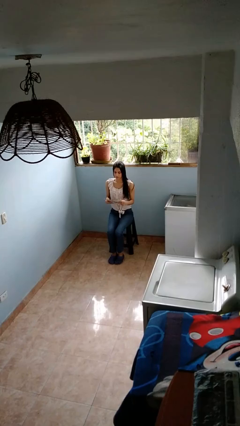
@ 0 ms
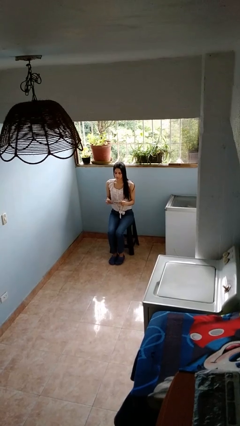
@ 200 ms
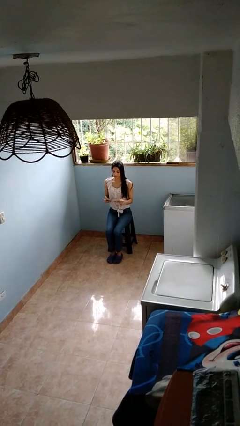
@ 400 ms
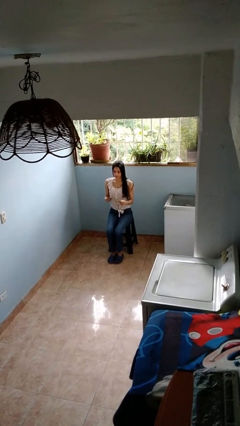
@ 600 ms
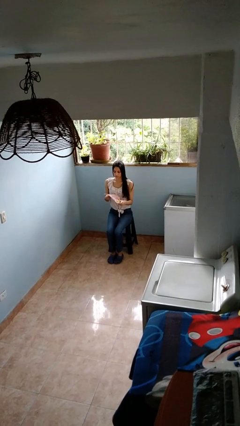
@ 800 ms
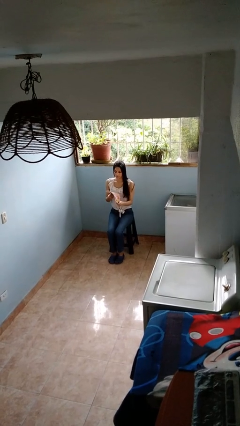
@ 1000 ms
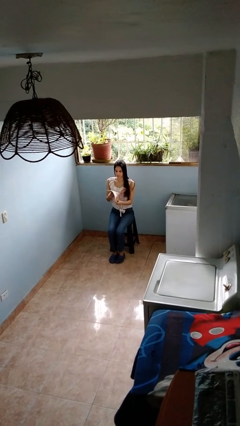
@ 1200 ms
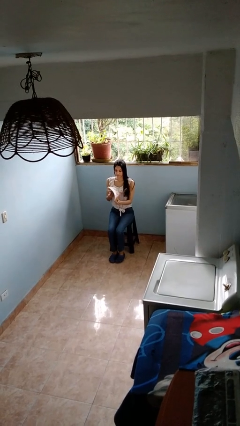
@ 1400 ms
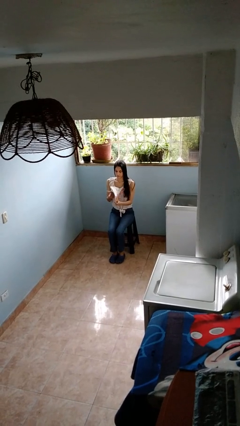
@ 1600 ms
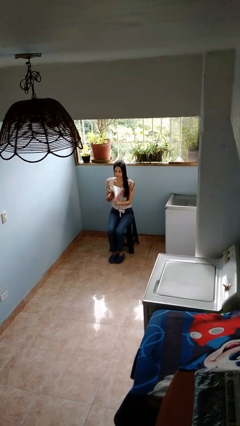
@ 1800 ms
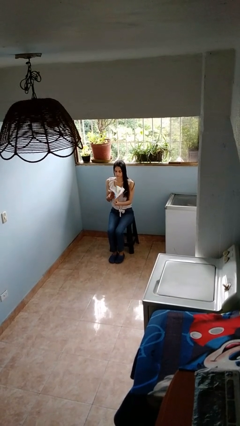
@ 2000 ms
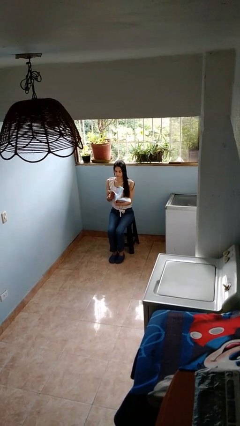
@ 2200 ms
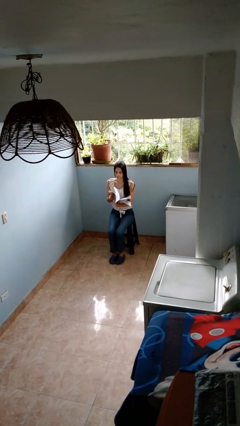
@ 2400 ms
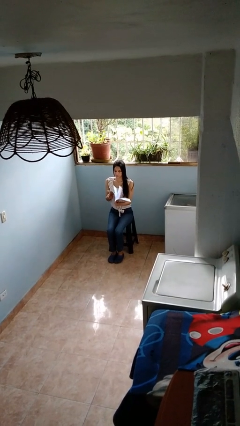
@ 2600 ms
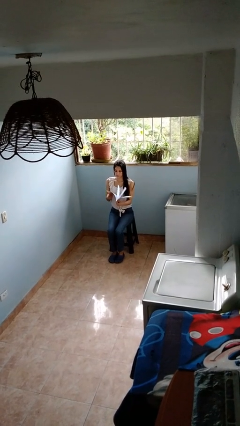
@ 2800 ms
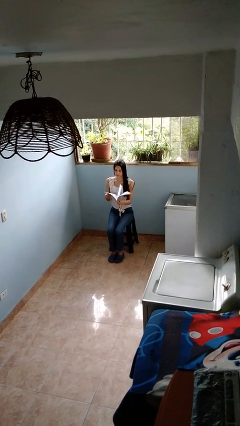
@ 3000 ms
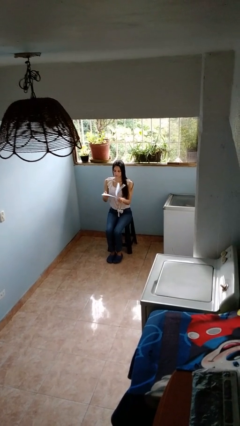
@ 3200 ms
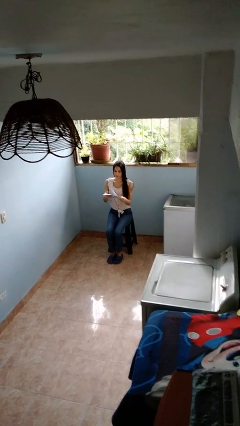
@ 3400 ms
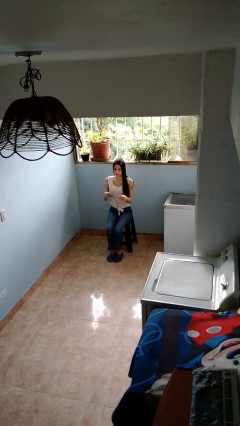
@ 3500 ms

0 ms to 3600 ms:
person reads magazine

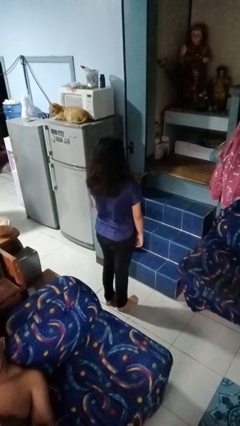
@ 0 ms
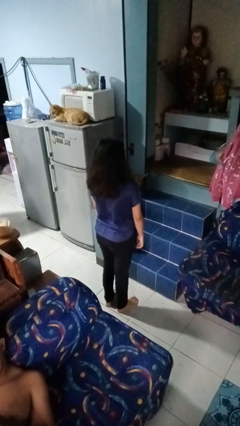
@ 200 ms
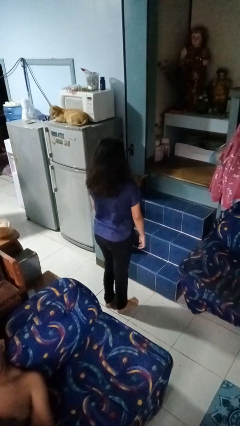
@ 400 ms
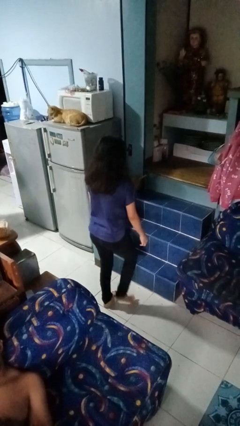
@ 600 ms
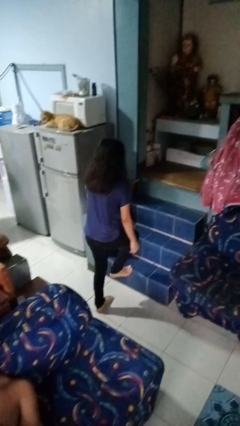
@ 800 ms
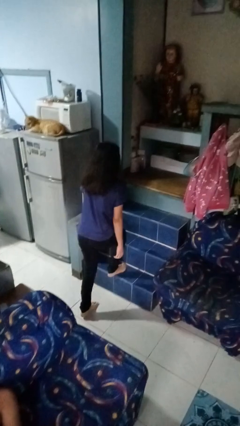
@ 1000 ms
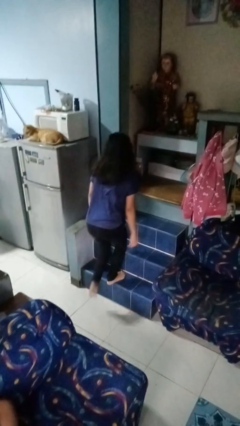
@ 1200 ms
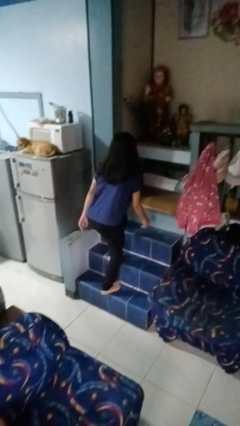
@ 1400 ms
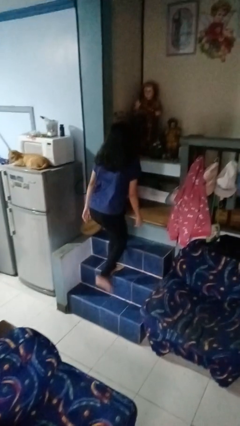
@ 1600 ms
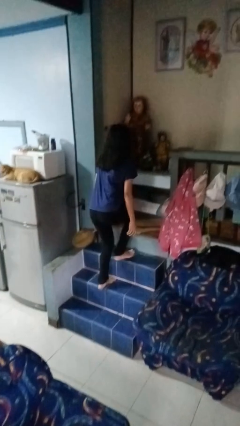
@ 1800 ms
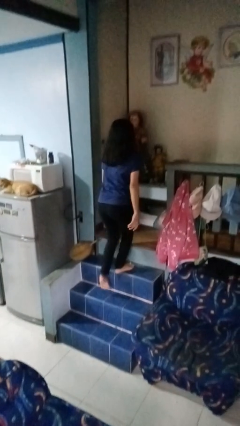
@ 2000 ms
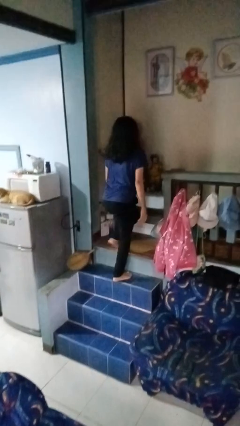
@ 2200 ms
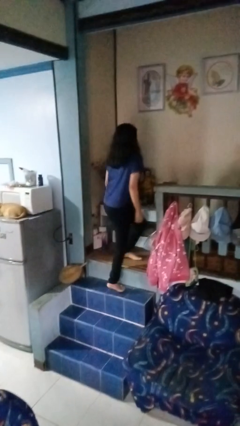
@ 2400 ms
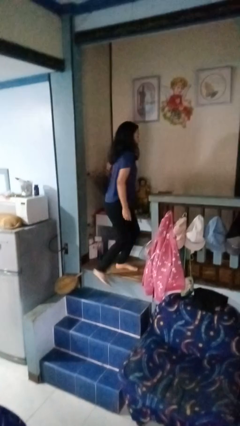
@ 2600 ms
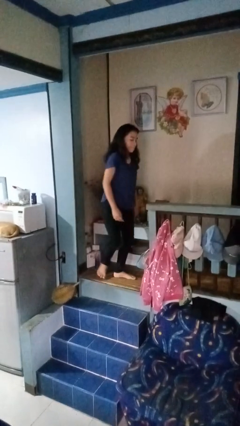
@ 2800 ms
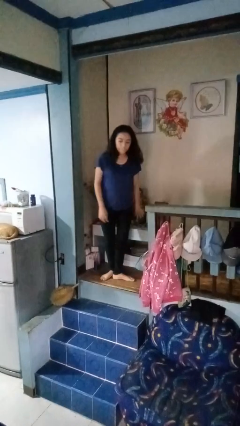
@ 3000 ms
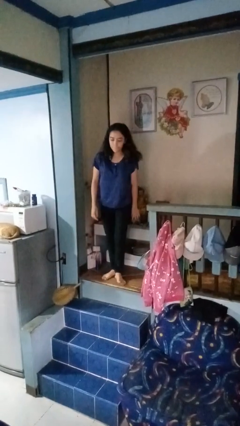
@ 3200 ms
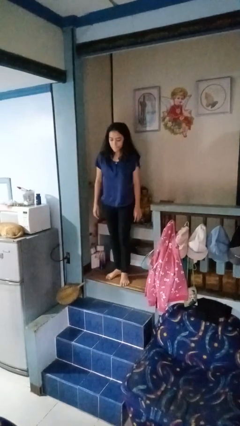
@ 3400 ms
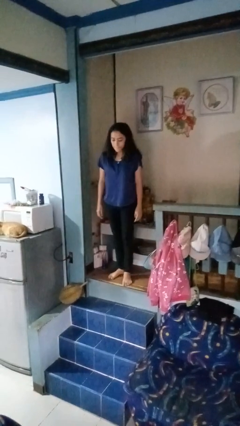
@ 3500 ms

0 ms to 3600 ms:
person climbs up stairs

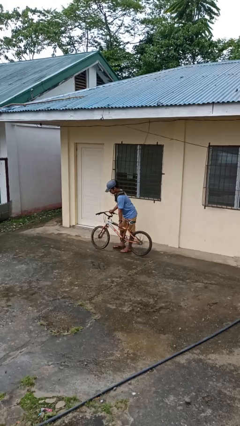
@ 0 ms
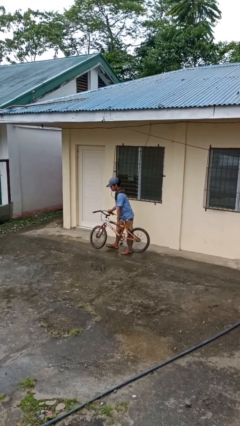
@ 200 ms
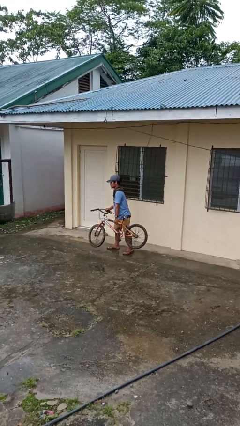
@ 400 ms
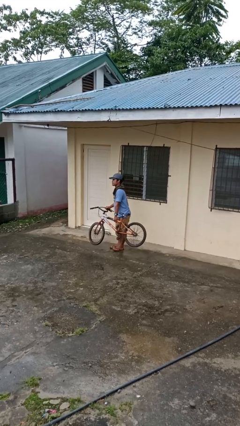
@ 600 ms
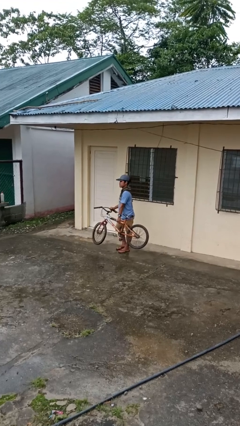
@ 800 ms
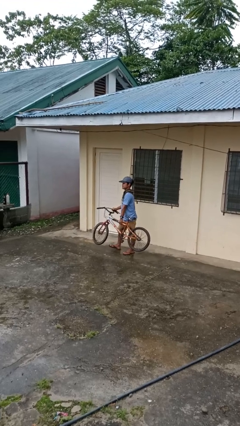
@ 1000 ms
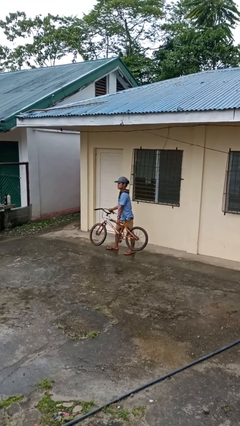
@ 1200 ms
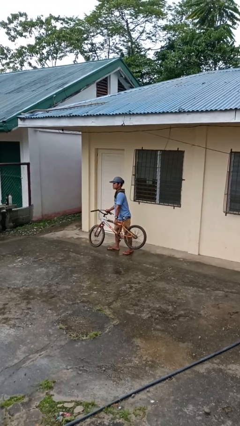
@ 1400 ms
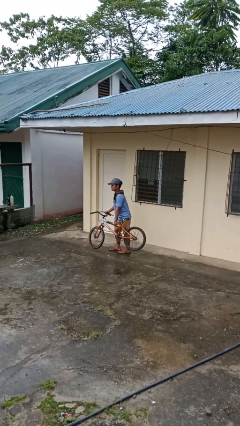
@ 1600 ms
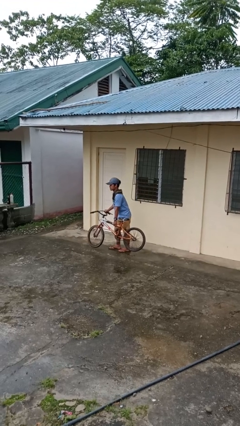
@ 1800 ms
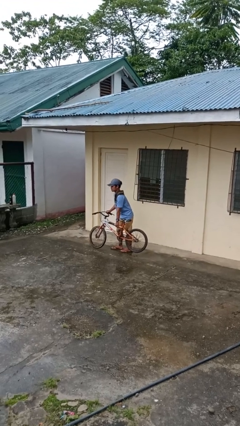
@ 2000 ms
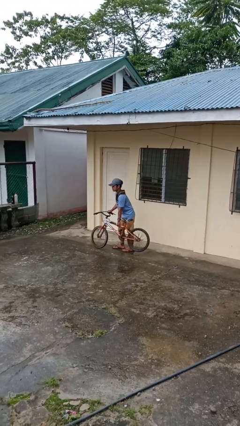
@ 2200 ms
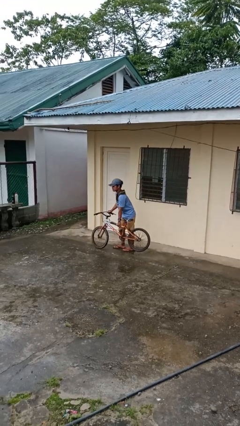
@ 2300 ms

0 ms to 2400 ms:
person carries bicycle

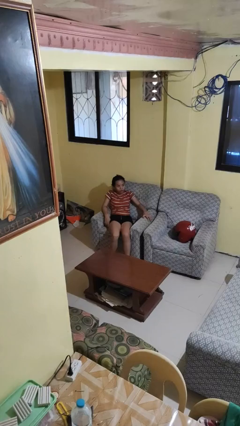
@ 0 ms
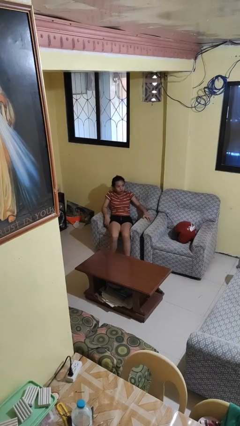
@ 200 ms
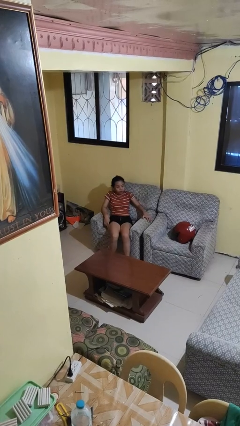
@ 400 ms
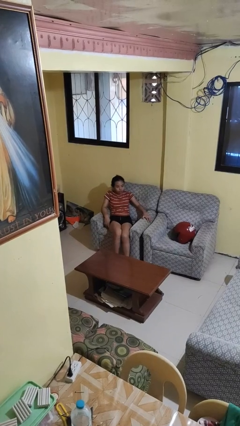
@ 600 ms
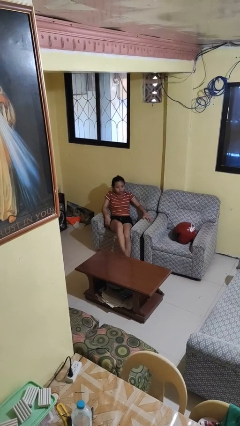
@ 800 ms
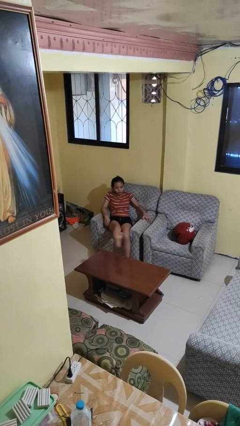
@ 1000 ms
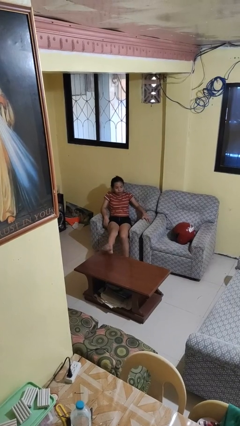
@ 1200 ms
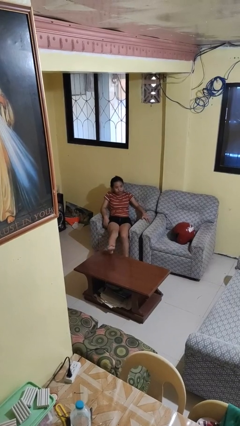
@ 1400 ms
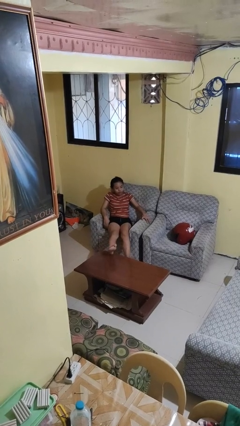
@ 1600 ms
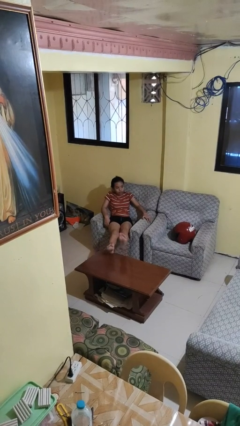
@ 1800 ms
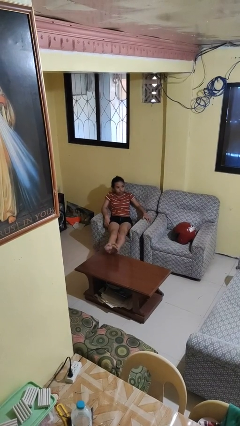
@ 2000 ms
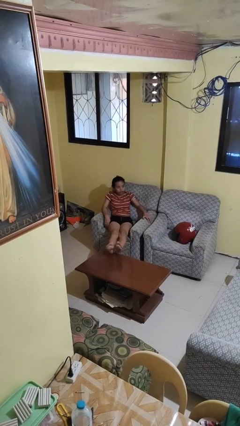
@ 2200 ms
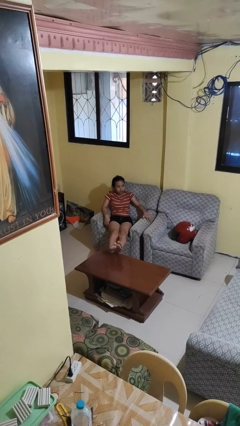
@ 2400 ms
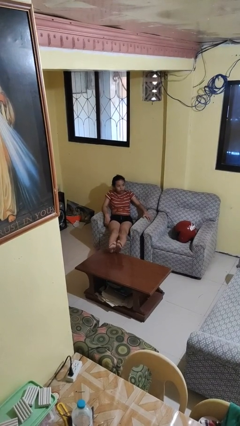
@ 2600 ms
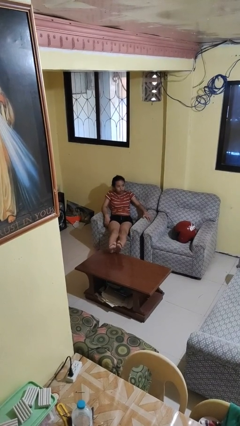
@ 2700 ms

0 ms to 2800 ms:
person puts feet up

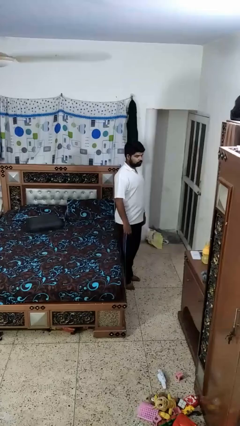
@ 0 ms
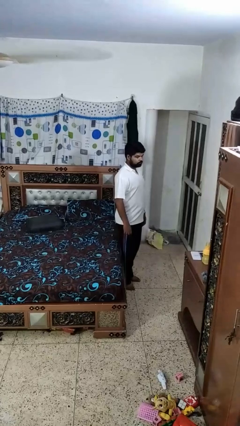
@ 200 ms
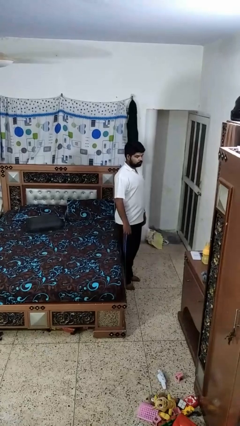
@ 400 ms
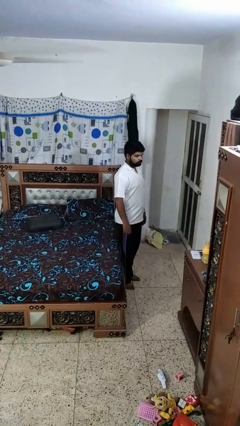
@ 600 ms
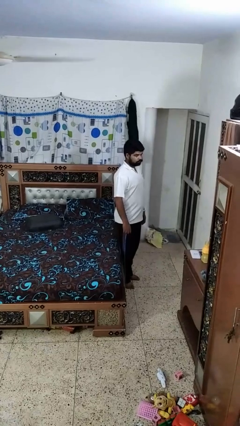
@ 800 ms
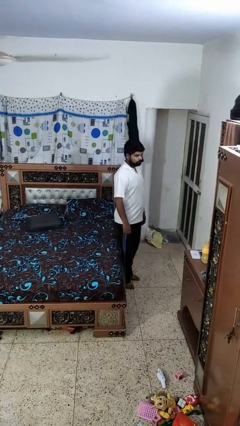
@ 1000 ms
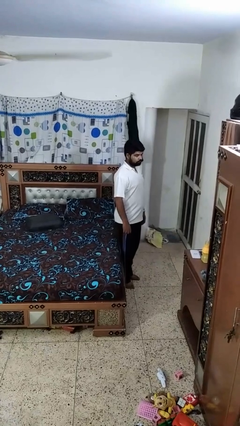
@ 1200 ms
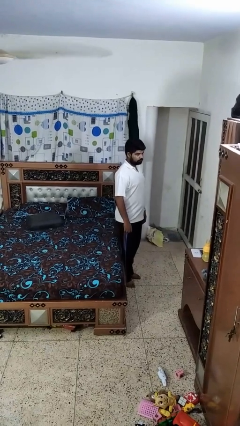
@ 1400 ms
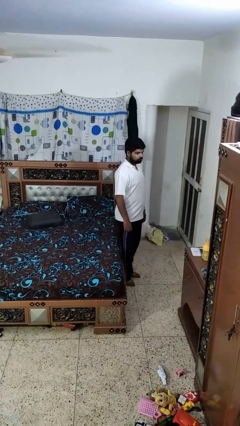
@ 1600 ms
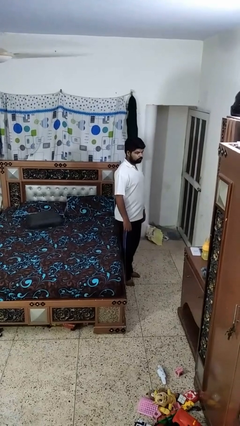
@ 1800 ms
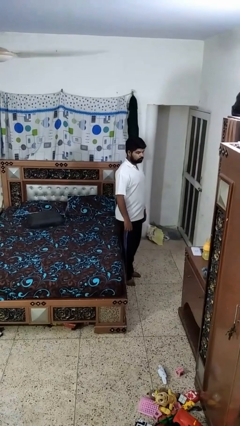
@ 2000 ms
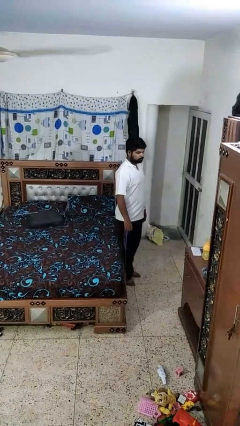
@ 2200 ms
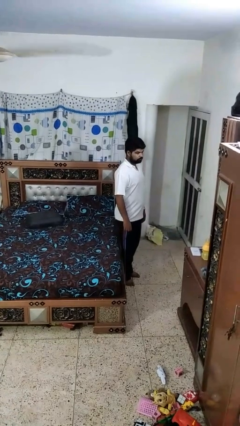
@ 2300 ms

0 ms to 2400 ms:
person lies down on bed

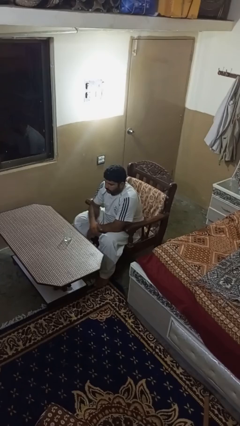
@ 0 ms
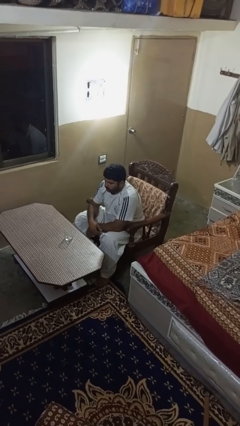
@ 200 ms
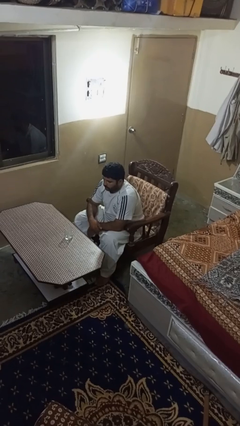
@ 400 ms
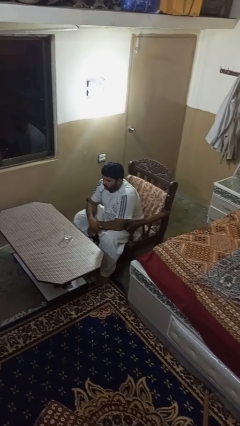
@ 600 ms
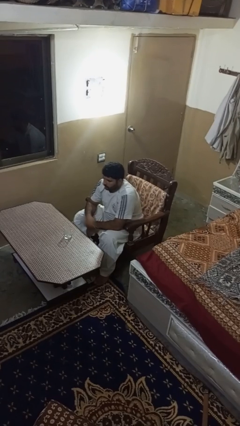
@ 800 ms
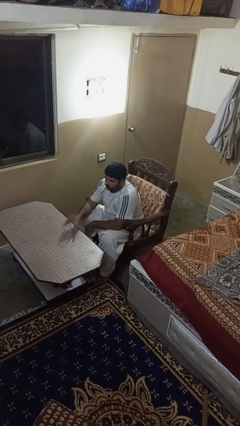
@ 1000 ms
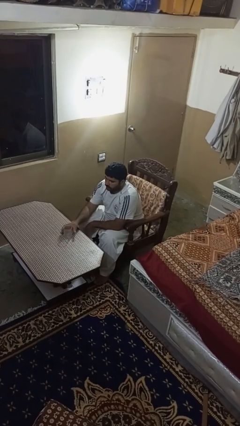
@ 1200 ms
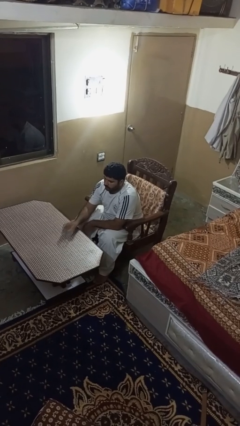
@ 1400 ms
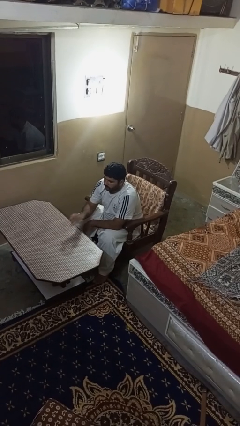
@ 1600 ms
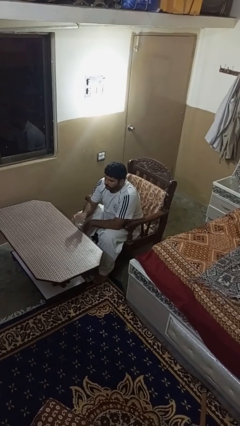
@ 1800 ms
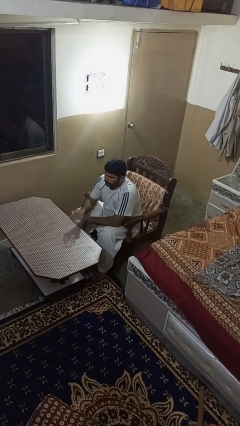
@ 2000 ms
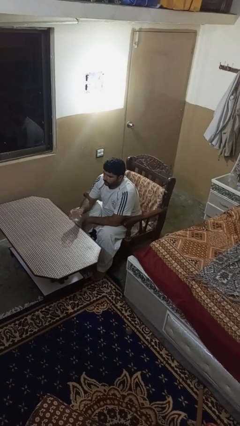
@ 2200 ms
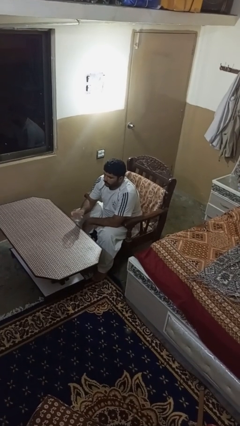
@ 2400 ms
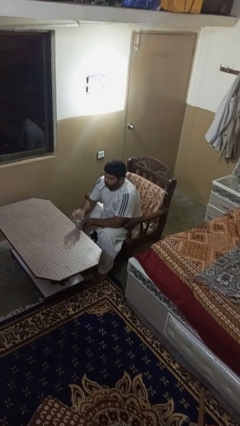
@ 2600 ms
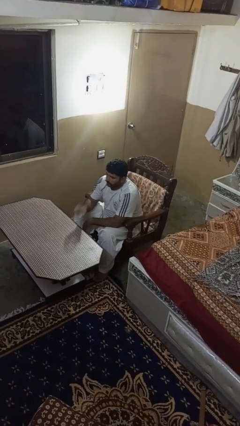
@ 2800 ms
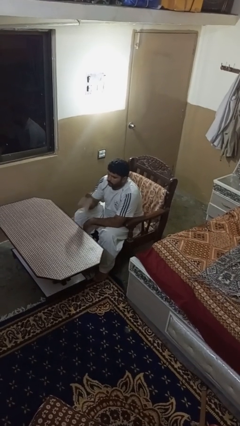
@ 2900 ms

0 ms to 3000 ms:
person picks up object from table
